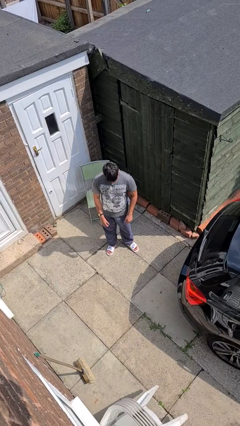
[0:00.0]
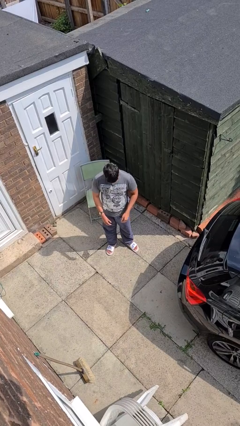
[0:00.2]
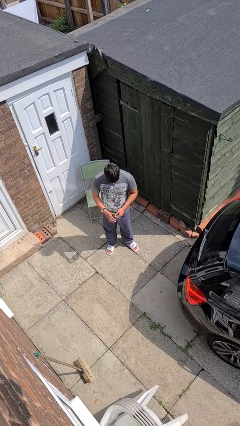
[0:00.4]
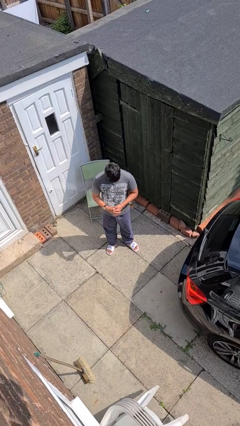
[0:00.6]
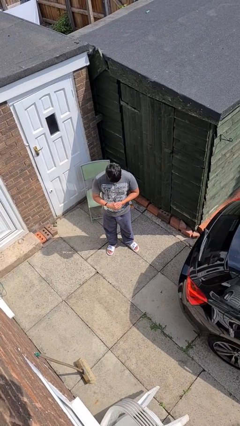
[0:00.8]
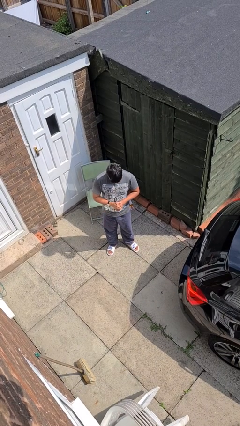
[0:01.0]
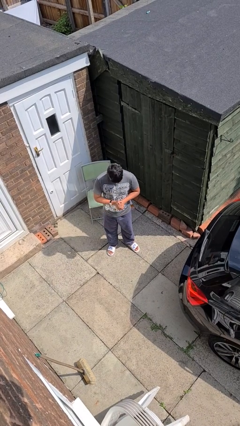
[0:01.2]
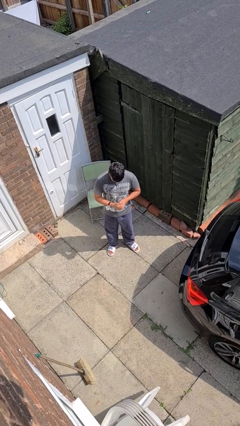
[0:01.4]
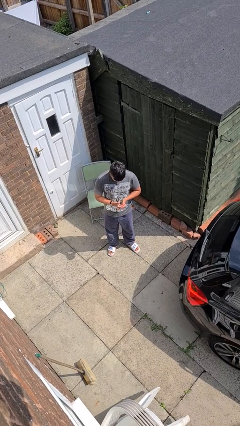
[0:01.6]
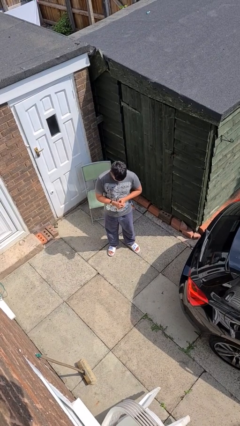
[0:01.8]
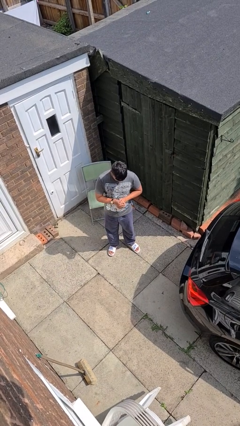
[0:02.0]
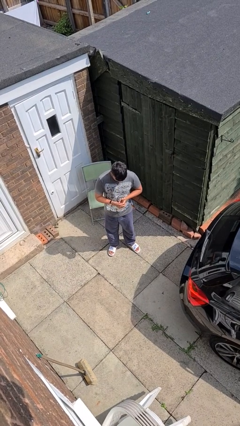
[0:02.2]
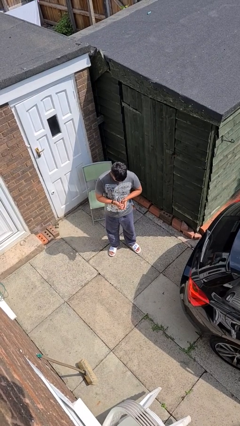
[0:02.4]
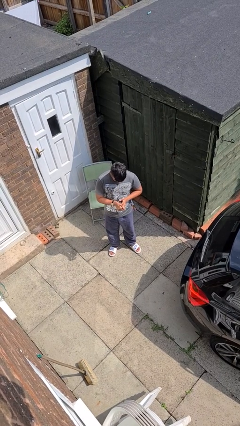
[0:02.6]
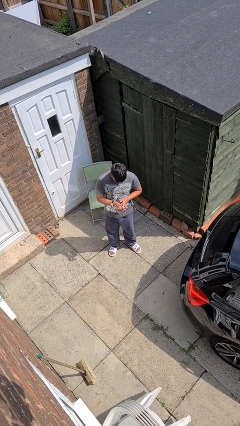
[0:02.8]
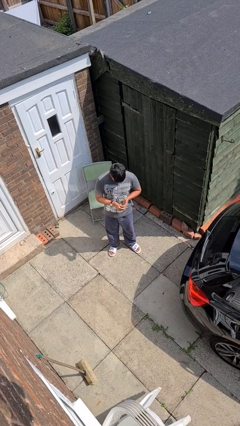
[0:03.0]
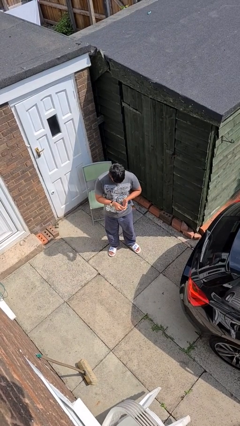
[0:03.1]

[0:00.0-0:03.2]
person cracks knuckles

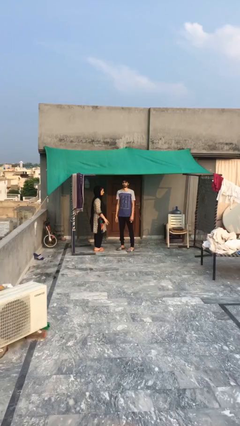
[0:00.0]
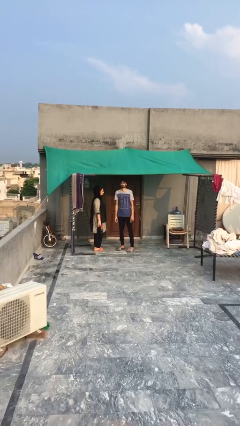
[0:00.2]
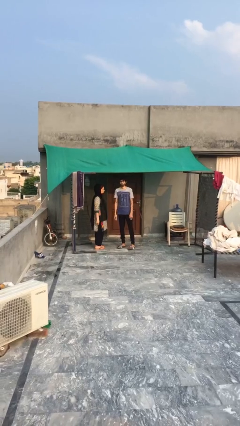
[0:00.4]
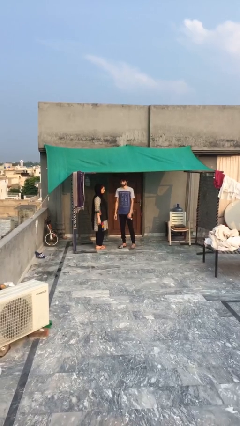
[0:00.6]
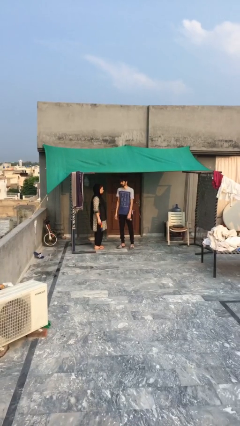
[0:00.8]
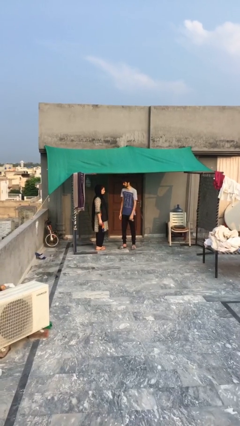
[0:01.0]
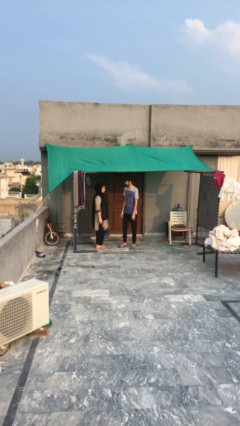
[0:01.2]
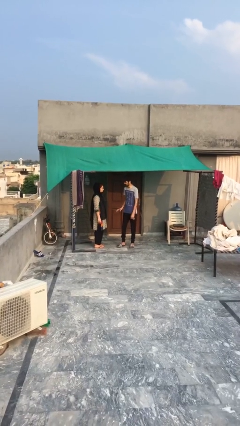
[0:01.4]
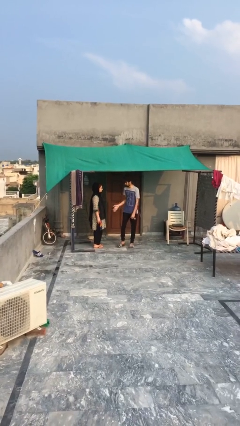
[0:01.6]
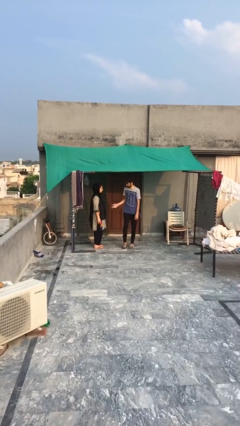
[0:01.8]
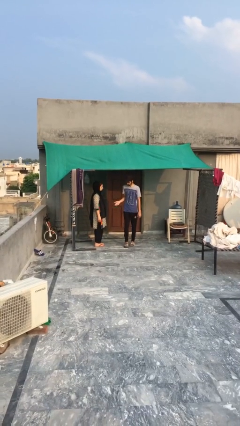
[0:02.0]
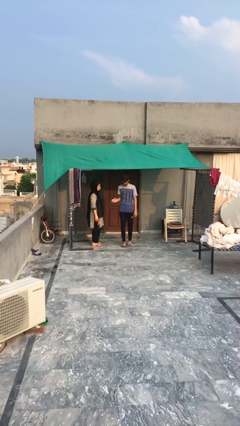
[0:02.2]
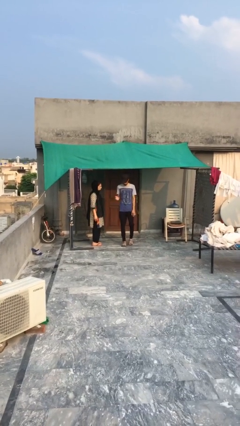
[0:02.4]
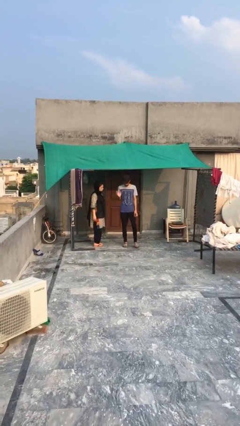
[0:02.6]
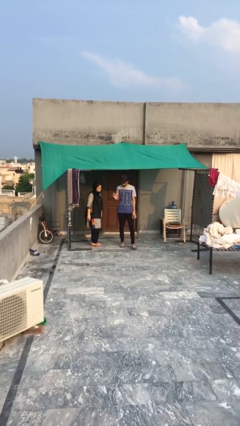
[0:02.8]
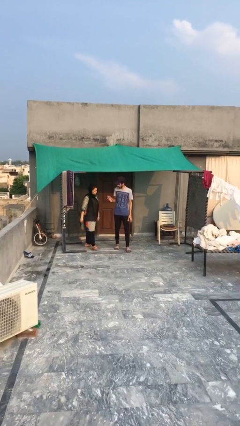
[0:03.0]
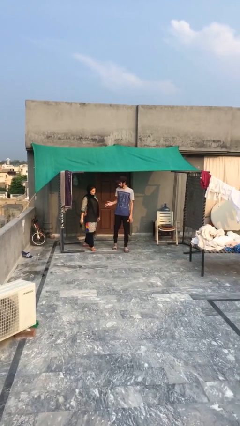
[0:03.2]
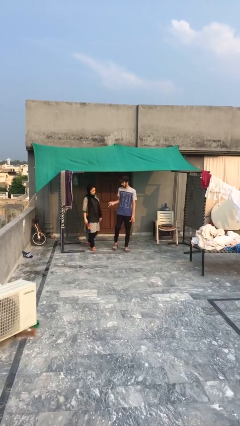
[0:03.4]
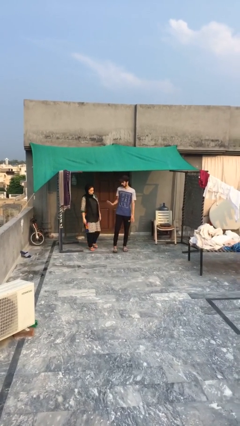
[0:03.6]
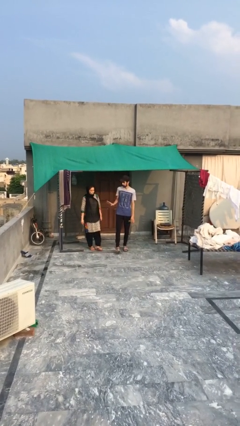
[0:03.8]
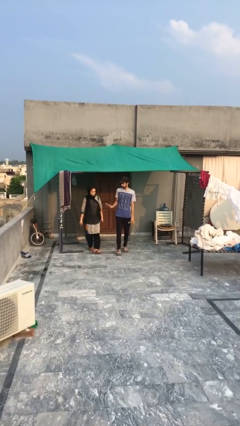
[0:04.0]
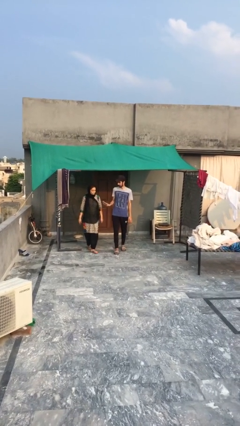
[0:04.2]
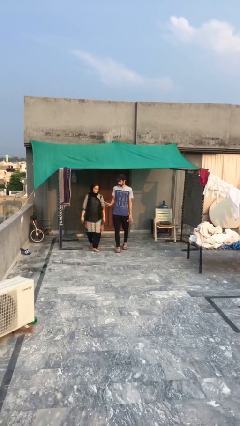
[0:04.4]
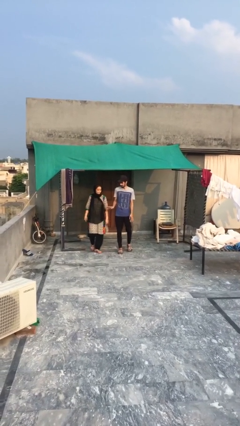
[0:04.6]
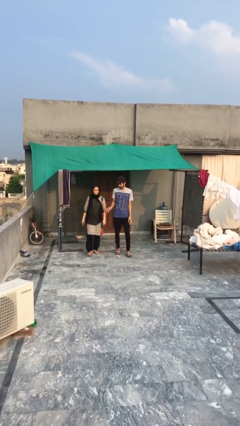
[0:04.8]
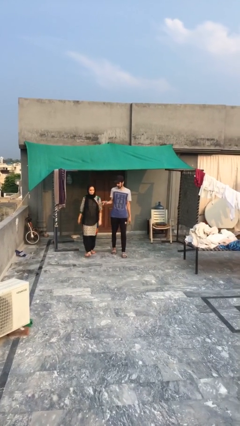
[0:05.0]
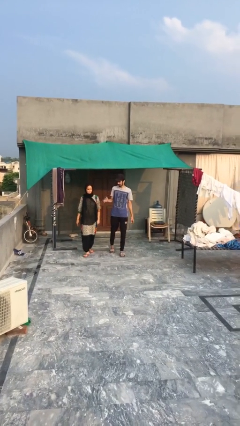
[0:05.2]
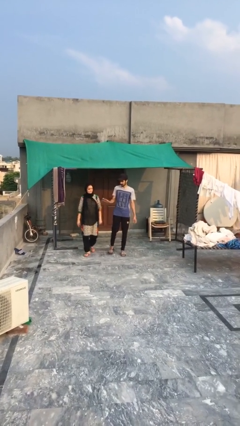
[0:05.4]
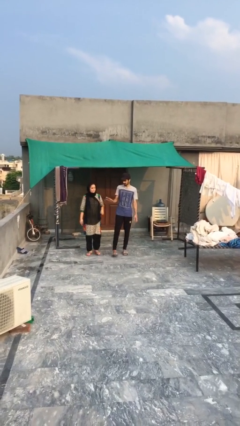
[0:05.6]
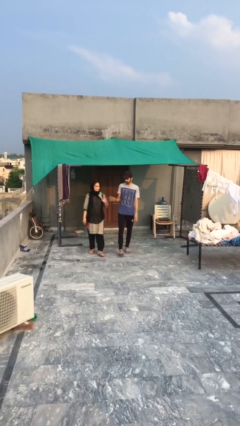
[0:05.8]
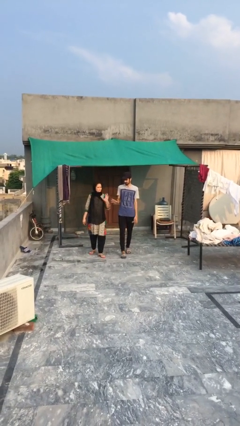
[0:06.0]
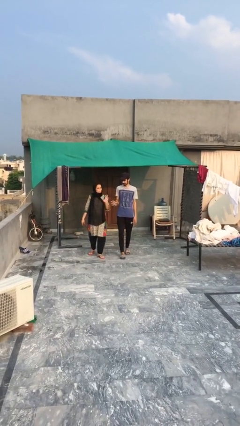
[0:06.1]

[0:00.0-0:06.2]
person talks to person

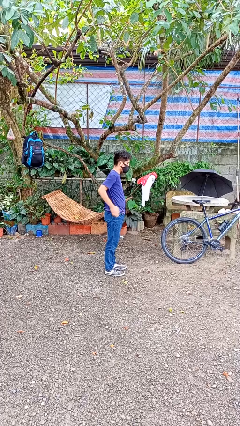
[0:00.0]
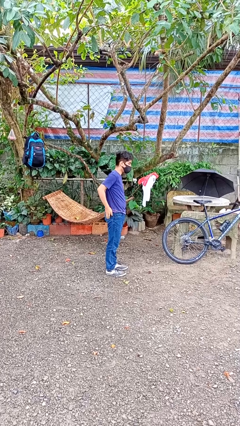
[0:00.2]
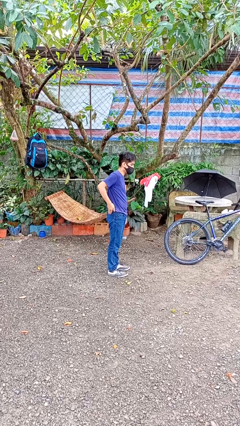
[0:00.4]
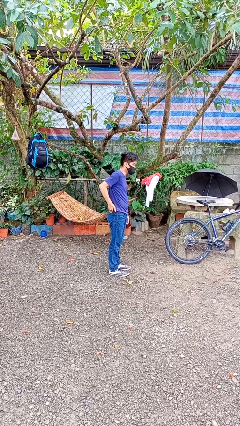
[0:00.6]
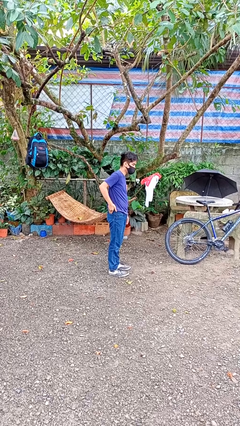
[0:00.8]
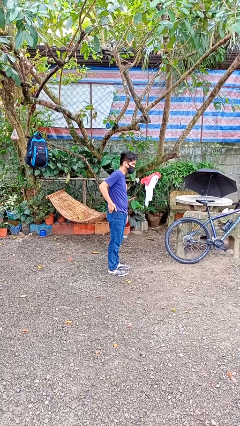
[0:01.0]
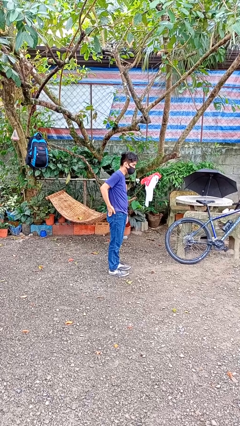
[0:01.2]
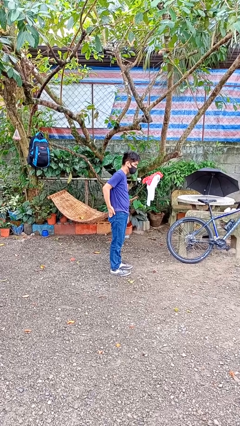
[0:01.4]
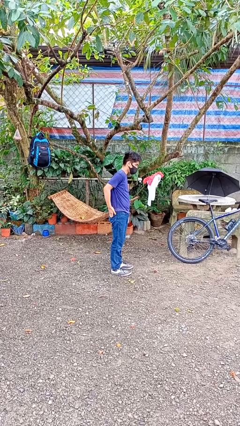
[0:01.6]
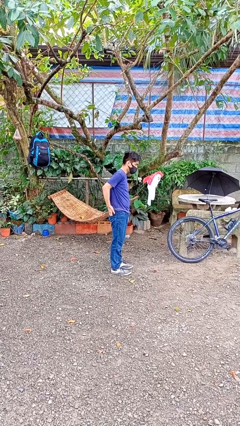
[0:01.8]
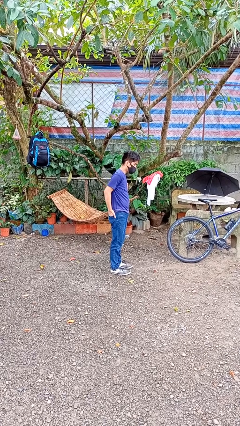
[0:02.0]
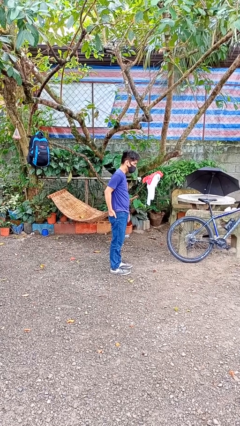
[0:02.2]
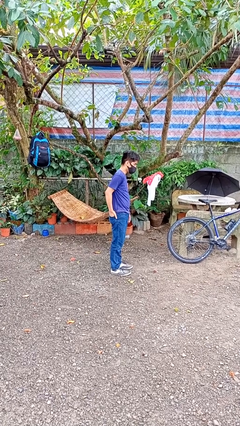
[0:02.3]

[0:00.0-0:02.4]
person puts hands in back pockets

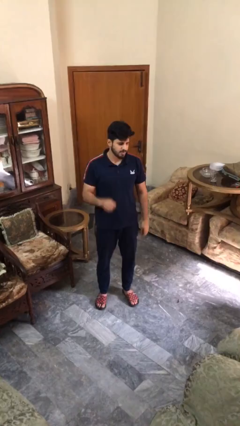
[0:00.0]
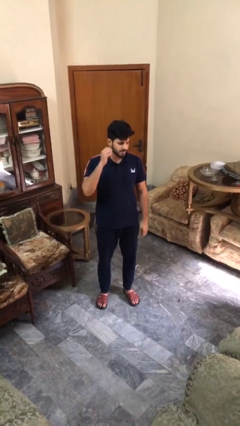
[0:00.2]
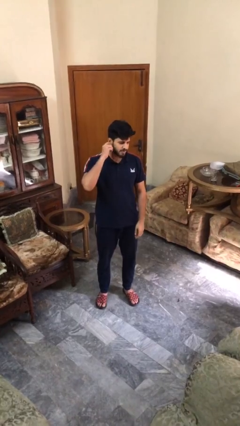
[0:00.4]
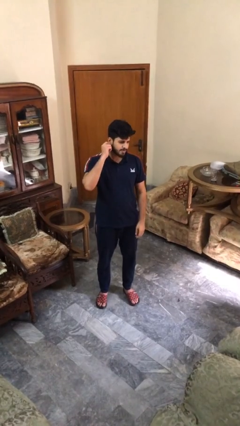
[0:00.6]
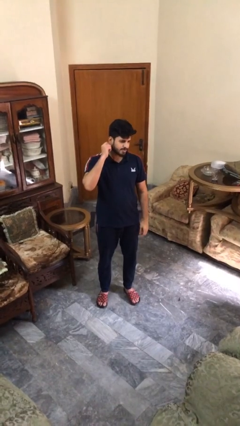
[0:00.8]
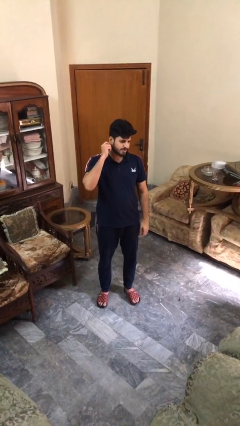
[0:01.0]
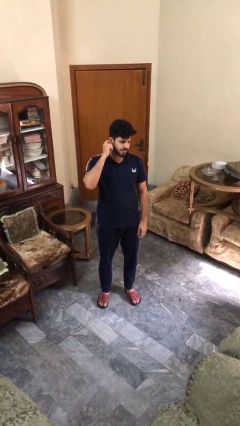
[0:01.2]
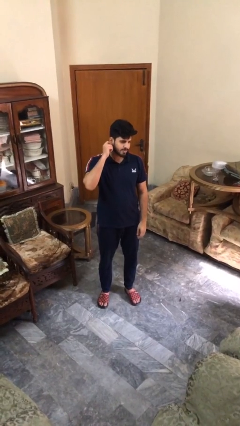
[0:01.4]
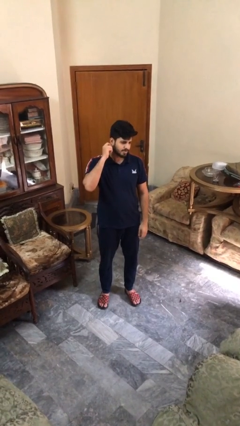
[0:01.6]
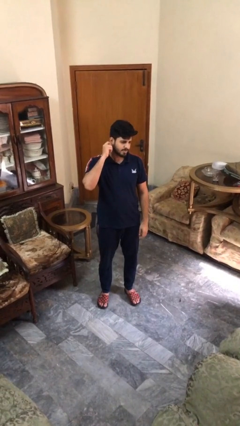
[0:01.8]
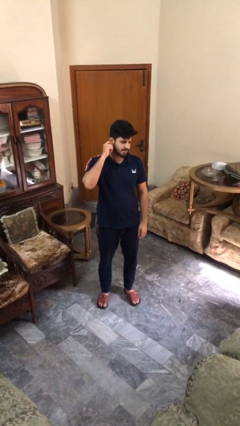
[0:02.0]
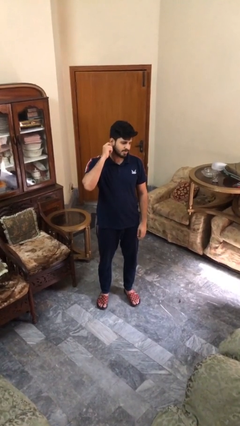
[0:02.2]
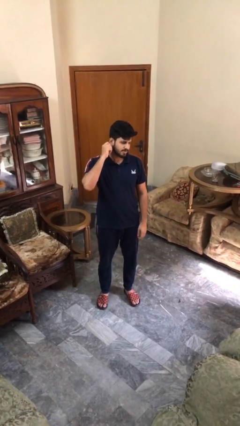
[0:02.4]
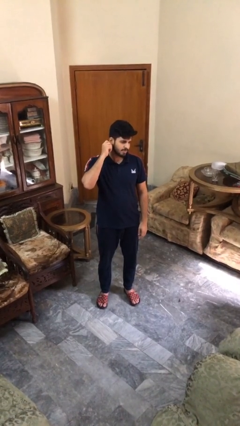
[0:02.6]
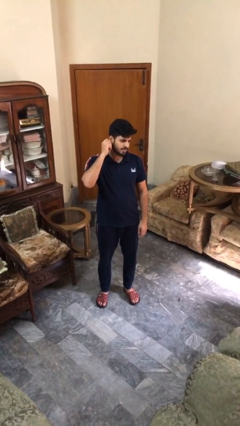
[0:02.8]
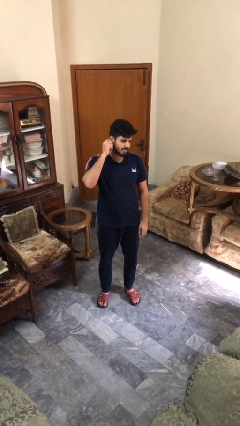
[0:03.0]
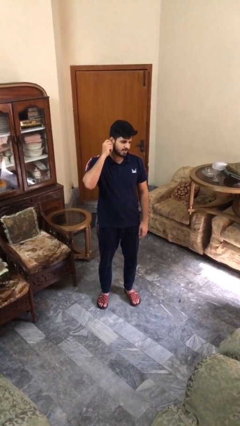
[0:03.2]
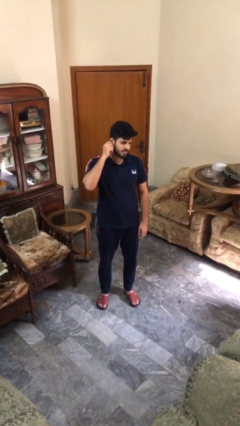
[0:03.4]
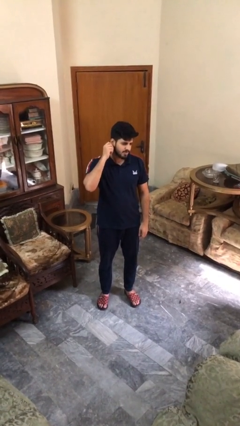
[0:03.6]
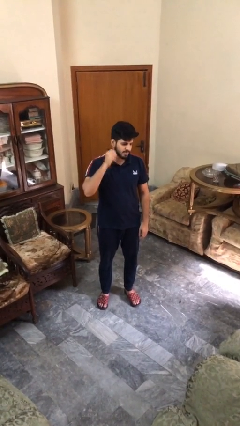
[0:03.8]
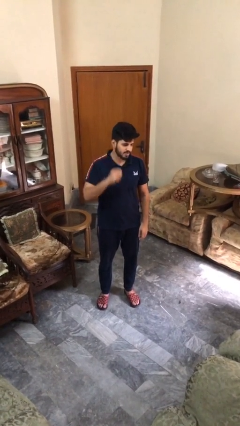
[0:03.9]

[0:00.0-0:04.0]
person touches earlobe

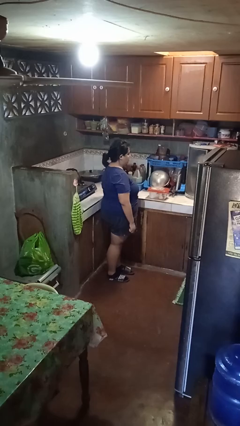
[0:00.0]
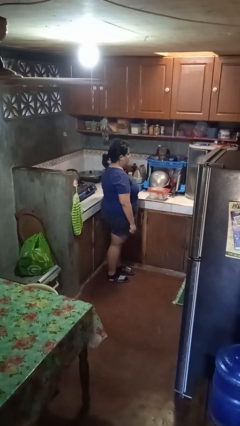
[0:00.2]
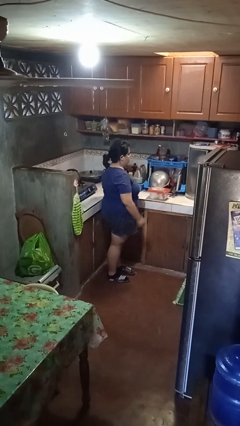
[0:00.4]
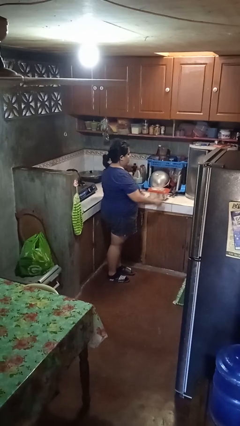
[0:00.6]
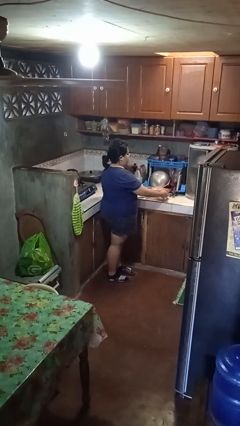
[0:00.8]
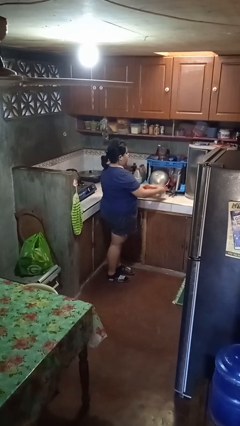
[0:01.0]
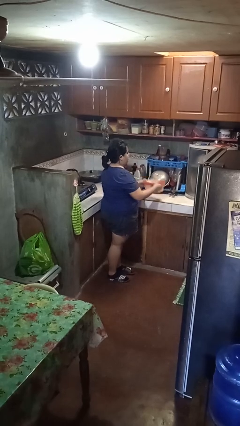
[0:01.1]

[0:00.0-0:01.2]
person picks up object from countertop
